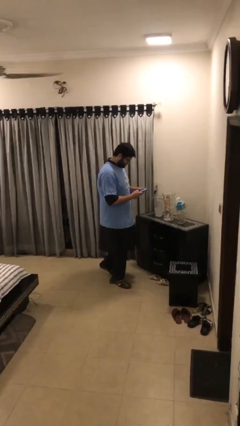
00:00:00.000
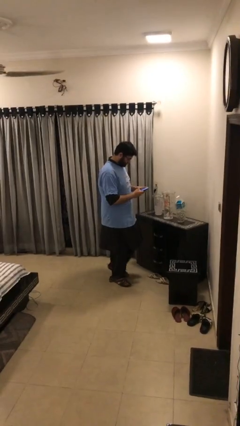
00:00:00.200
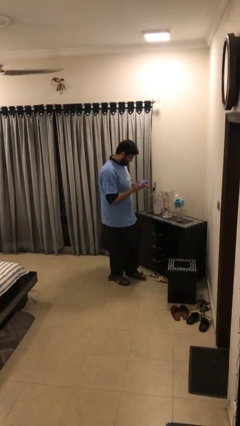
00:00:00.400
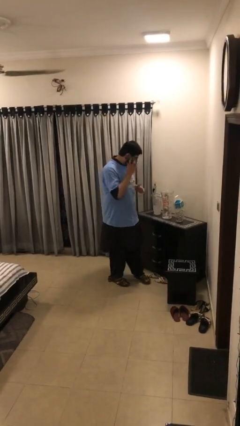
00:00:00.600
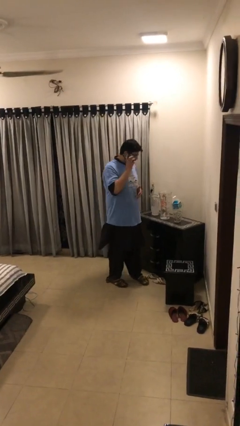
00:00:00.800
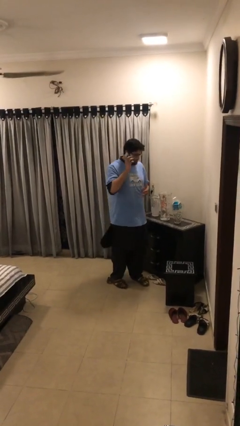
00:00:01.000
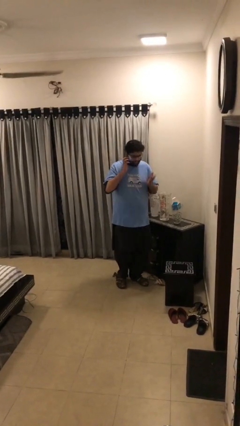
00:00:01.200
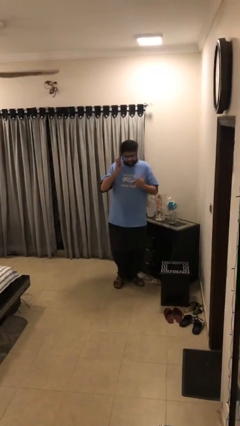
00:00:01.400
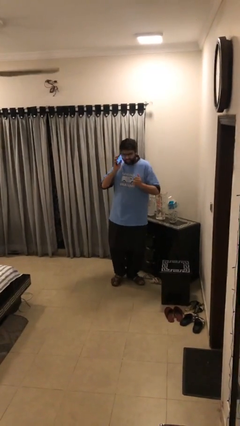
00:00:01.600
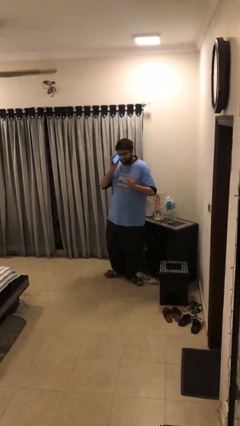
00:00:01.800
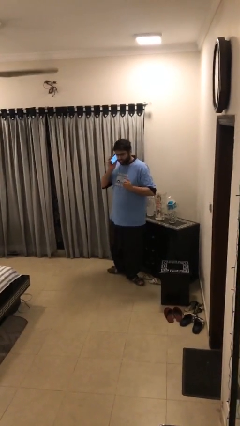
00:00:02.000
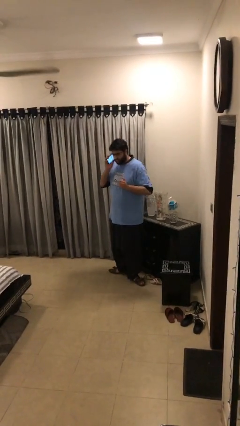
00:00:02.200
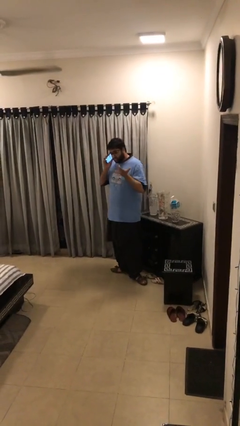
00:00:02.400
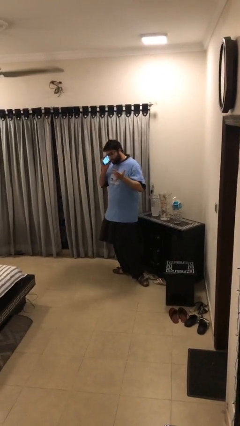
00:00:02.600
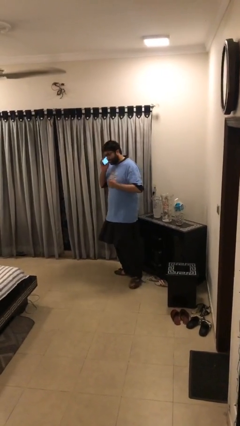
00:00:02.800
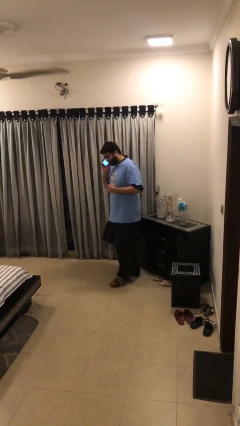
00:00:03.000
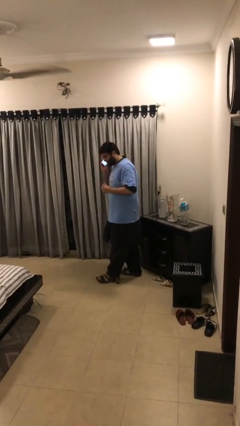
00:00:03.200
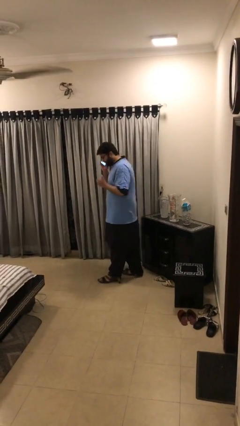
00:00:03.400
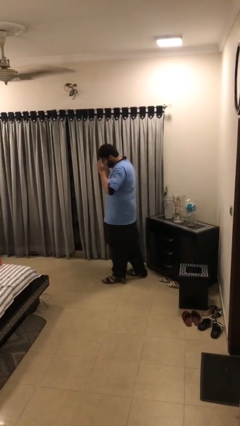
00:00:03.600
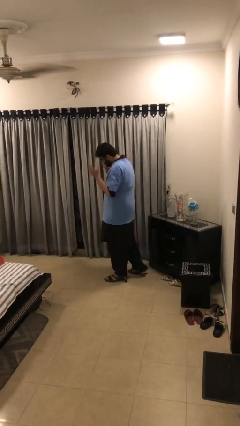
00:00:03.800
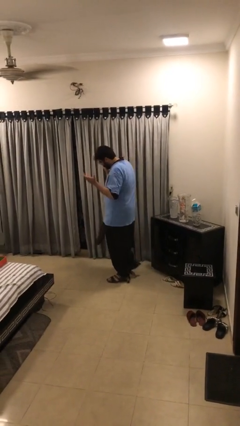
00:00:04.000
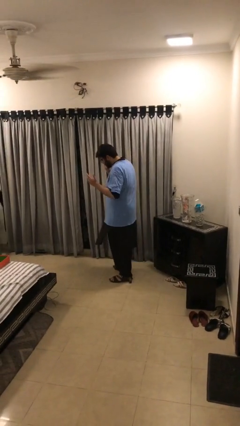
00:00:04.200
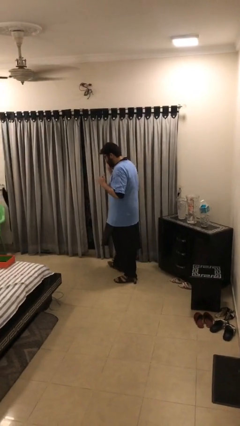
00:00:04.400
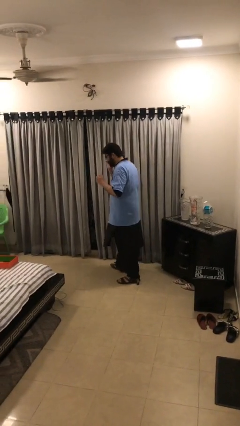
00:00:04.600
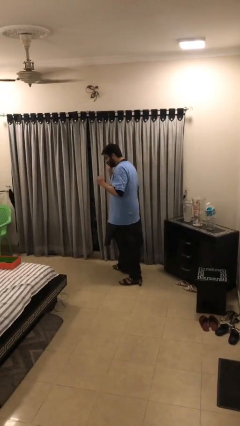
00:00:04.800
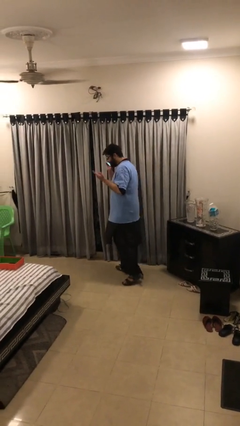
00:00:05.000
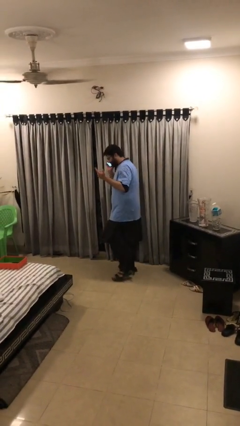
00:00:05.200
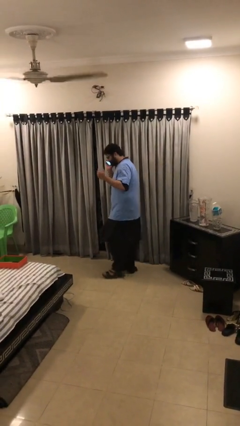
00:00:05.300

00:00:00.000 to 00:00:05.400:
person talks on phone

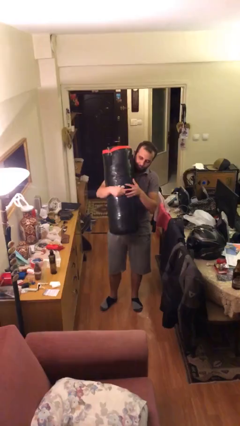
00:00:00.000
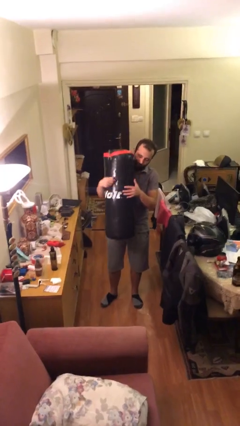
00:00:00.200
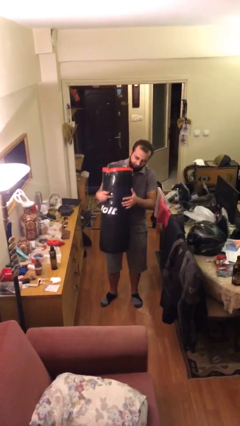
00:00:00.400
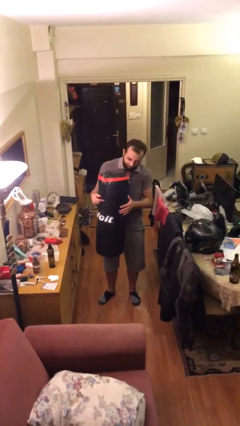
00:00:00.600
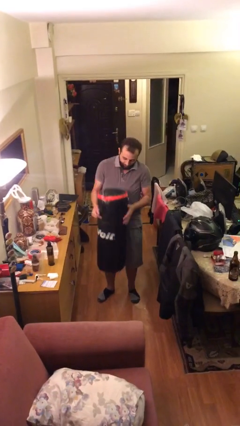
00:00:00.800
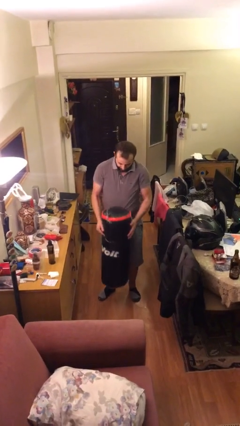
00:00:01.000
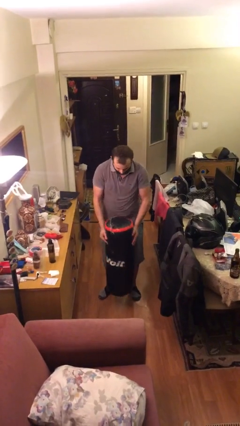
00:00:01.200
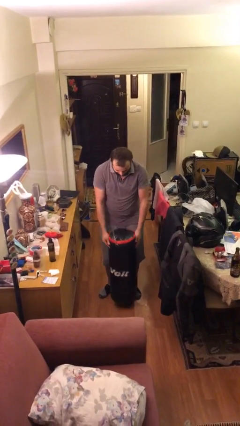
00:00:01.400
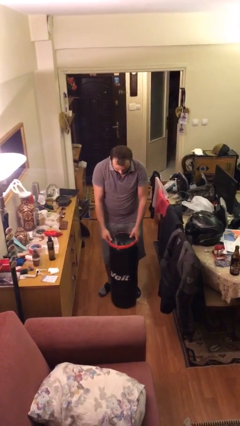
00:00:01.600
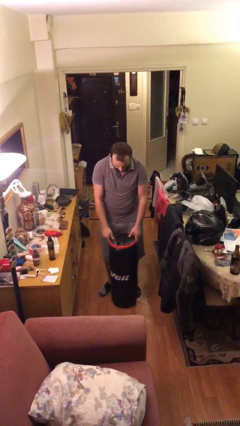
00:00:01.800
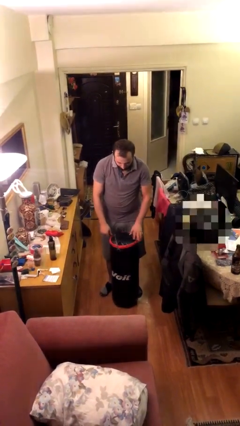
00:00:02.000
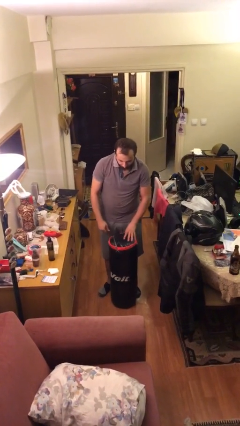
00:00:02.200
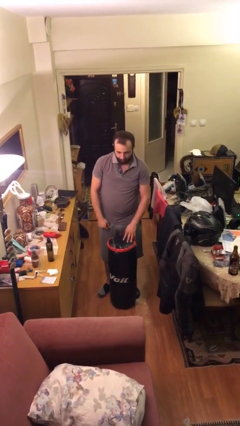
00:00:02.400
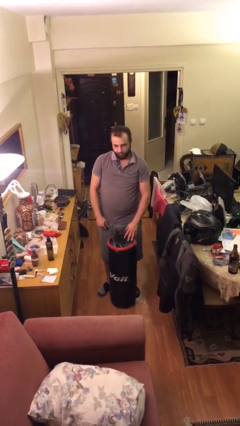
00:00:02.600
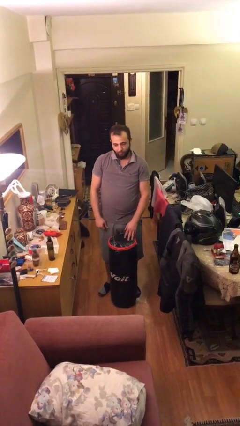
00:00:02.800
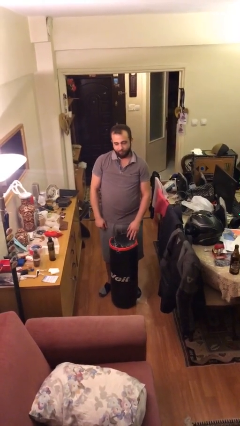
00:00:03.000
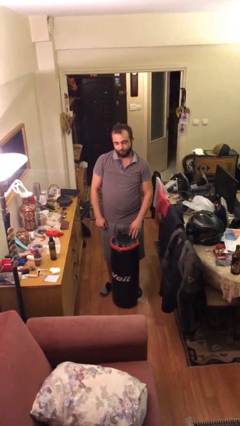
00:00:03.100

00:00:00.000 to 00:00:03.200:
person puts down object on floor

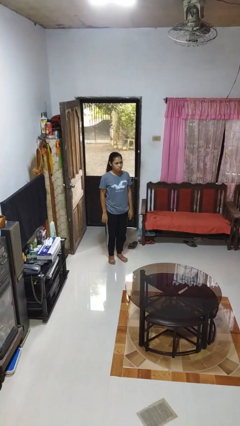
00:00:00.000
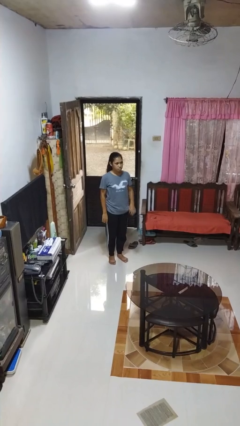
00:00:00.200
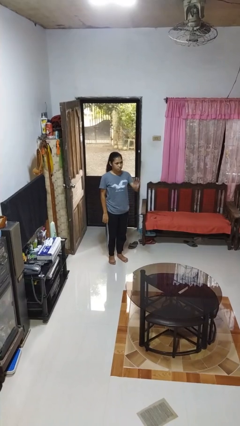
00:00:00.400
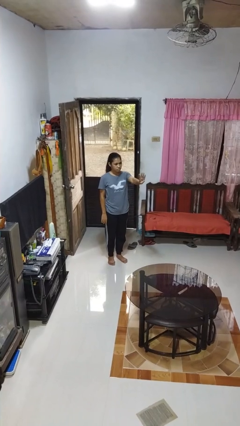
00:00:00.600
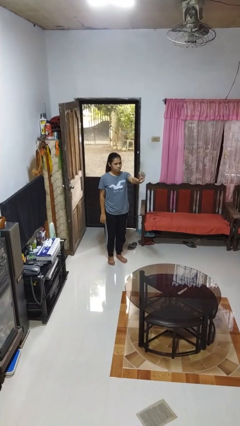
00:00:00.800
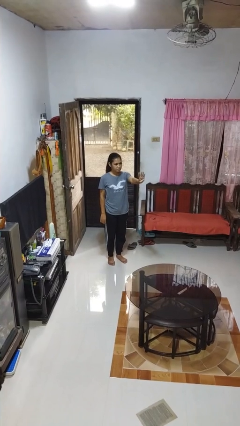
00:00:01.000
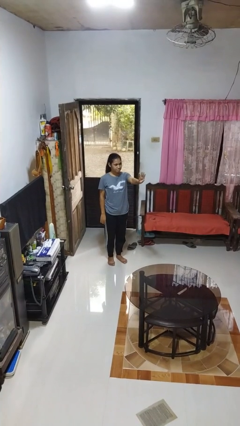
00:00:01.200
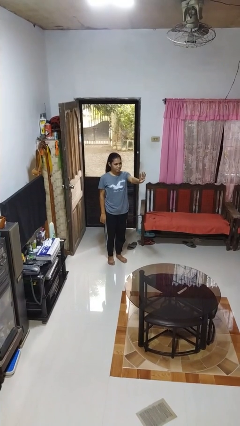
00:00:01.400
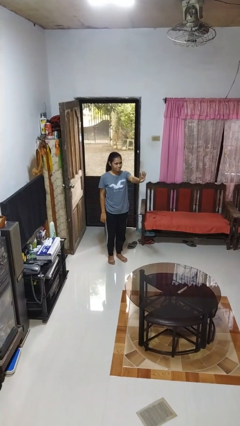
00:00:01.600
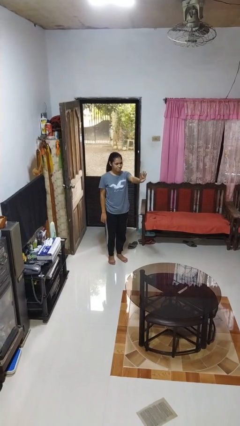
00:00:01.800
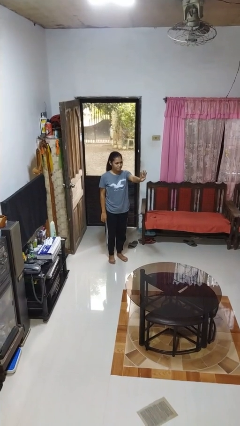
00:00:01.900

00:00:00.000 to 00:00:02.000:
person gestures number four

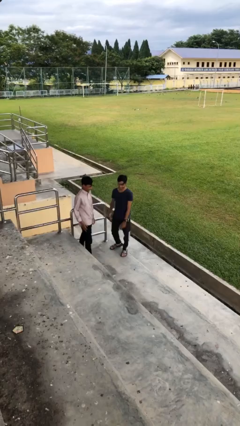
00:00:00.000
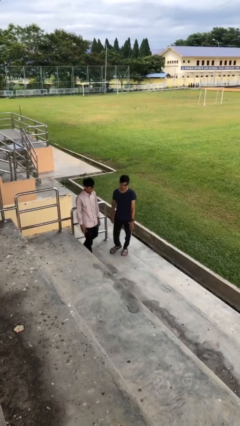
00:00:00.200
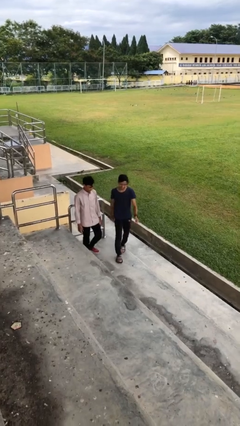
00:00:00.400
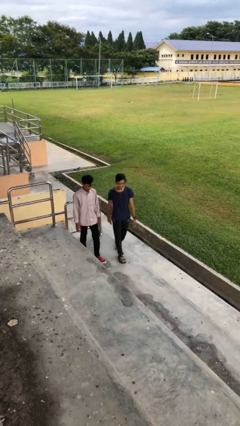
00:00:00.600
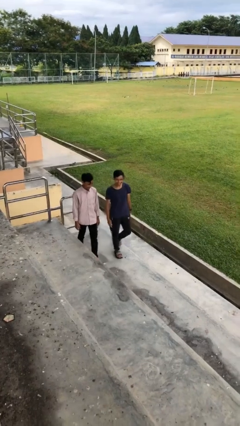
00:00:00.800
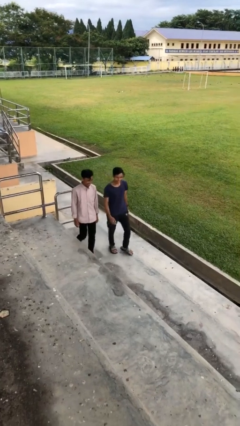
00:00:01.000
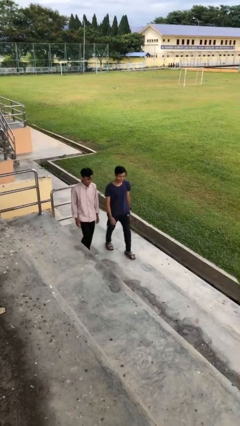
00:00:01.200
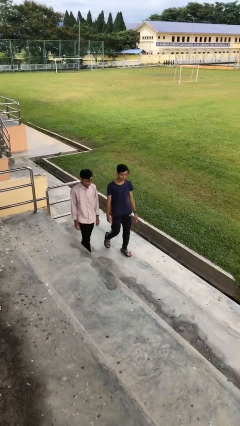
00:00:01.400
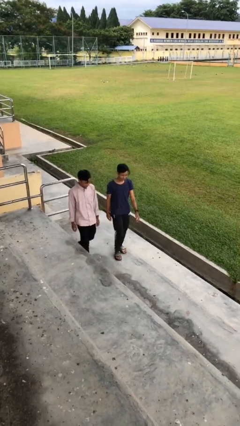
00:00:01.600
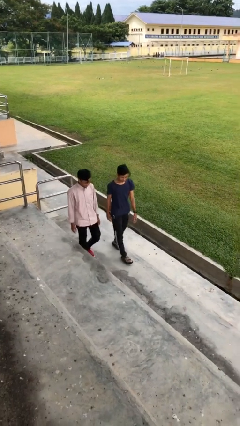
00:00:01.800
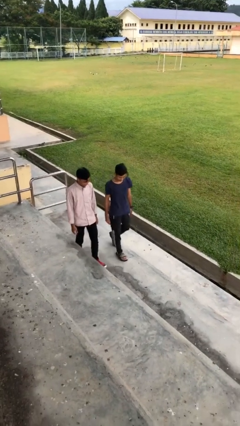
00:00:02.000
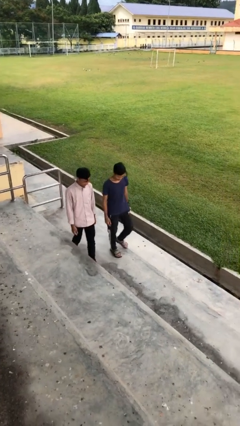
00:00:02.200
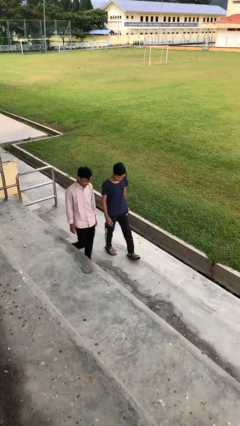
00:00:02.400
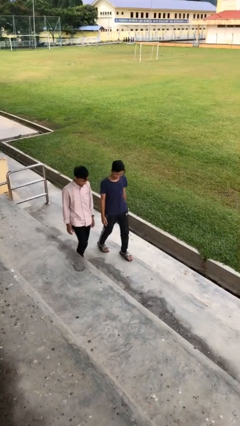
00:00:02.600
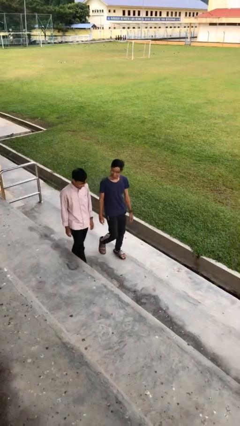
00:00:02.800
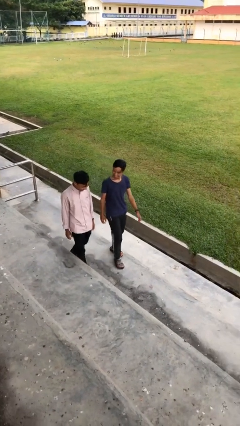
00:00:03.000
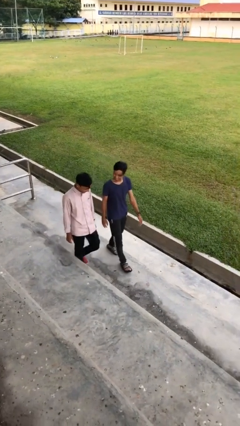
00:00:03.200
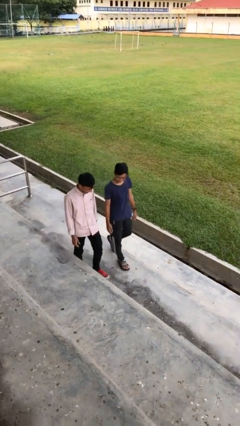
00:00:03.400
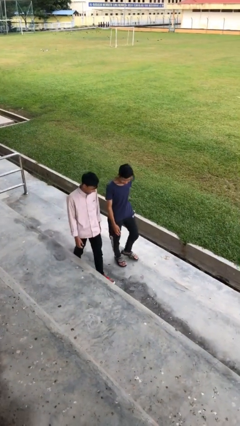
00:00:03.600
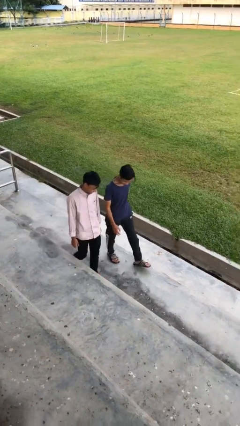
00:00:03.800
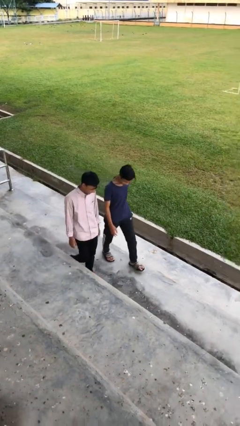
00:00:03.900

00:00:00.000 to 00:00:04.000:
person talks to person

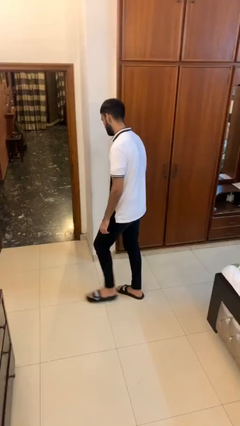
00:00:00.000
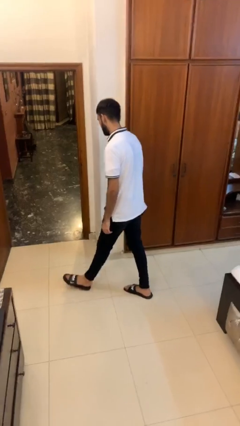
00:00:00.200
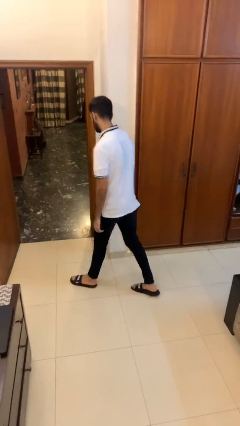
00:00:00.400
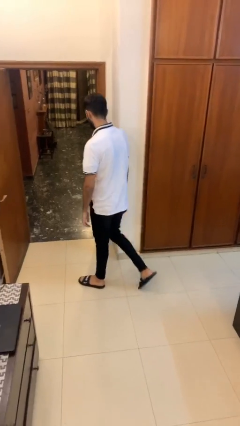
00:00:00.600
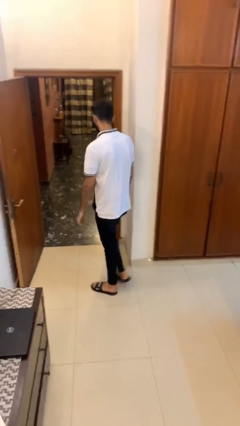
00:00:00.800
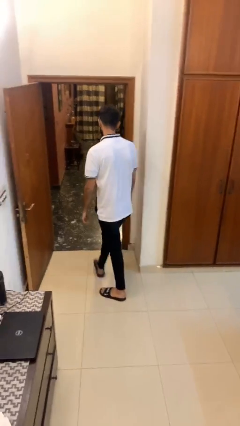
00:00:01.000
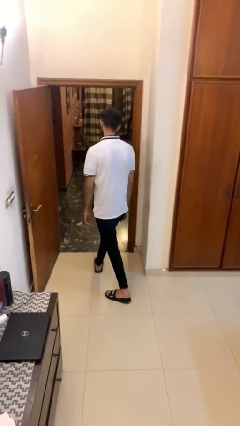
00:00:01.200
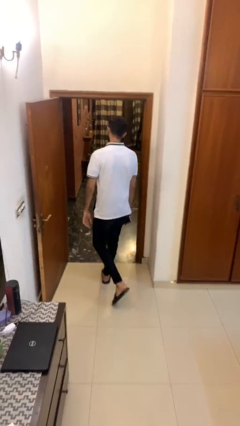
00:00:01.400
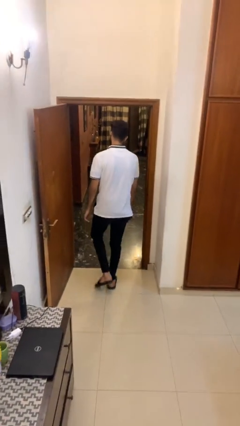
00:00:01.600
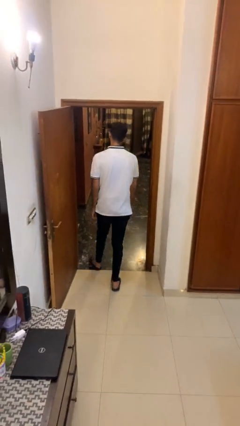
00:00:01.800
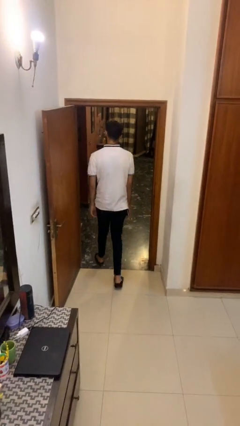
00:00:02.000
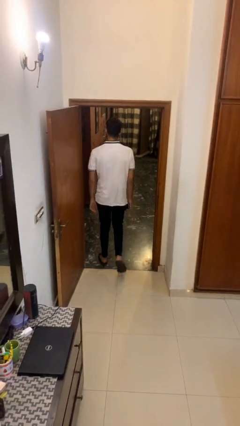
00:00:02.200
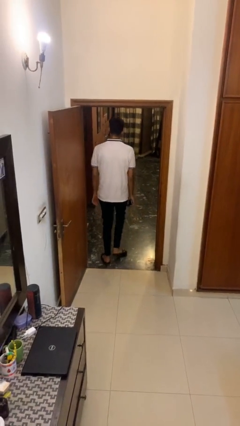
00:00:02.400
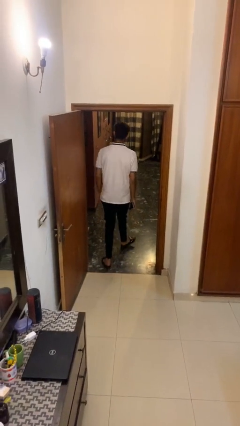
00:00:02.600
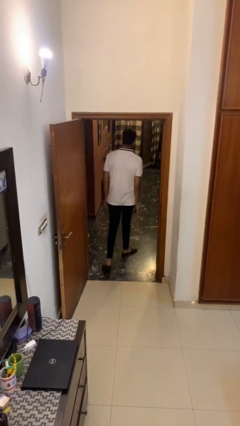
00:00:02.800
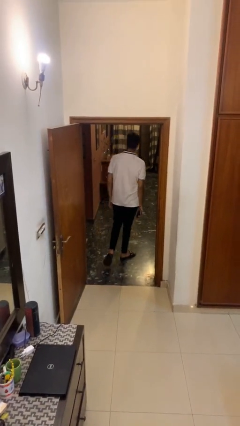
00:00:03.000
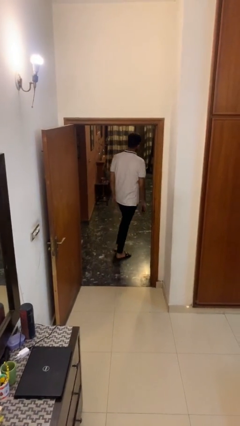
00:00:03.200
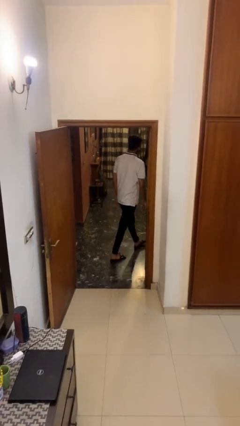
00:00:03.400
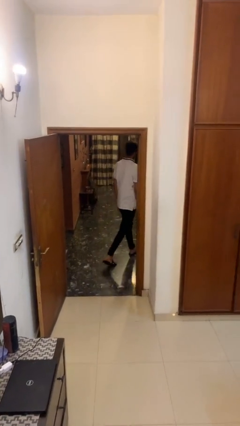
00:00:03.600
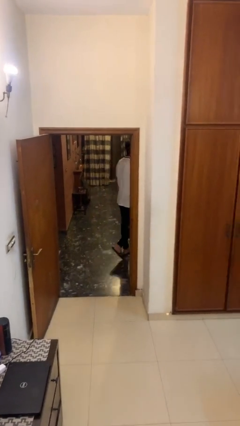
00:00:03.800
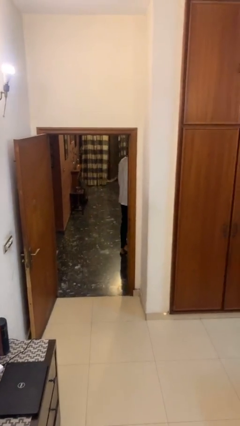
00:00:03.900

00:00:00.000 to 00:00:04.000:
person exits scene through structure
